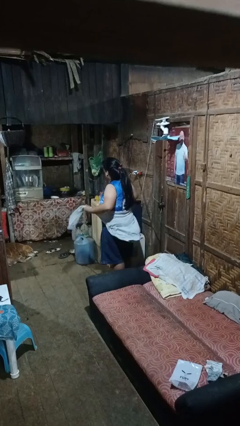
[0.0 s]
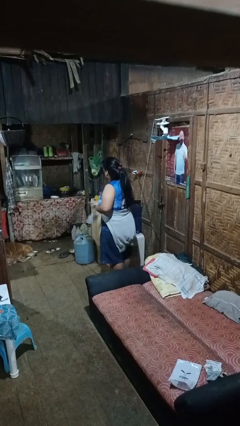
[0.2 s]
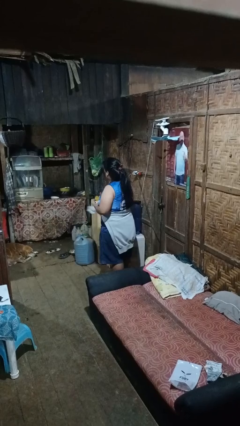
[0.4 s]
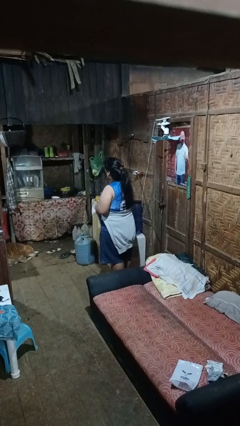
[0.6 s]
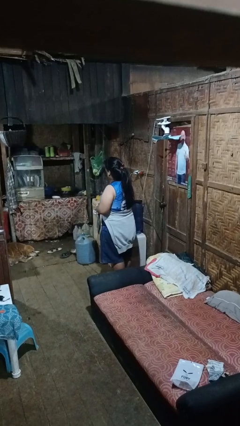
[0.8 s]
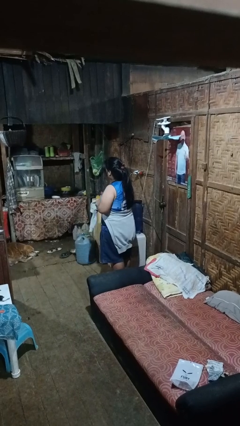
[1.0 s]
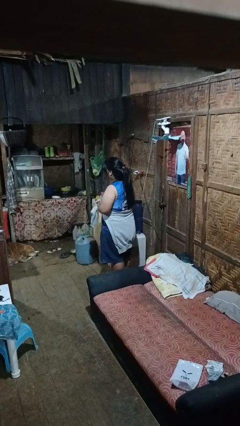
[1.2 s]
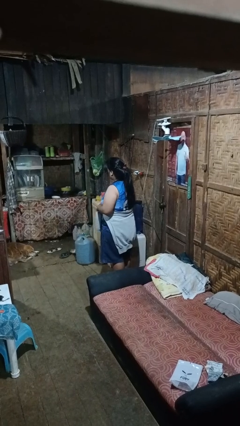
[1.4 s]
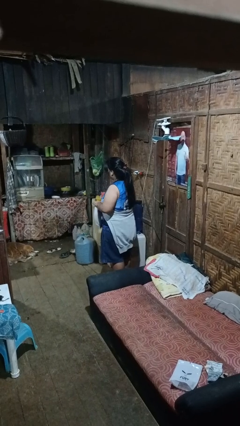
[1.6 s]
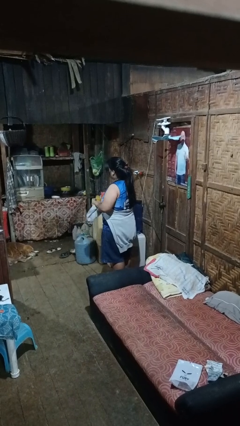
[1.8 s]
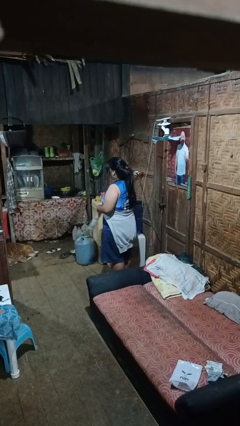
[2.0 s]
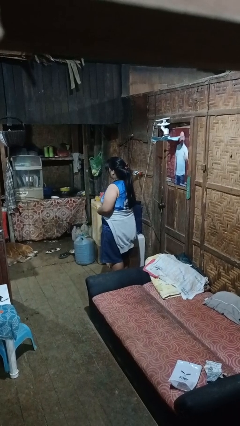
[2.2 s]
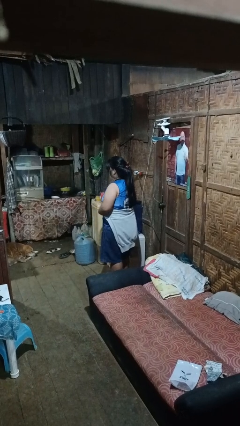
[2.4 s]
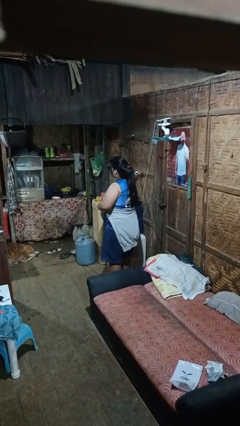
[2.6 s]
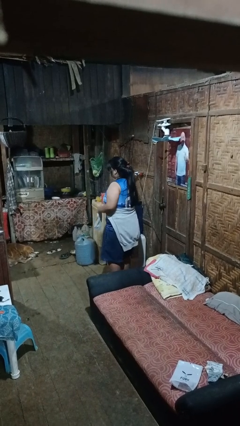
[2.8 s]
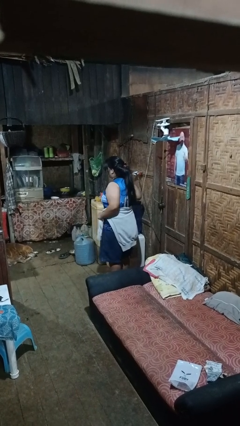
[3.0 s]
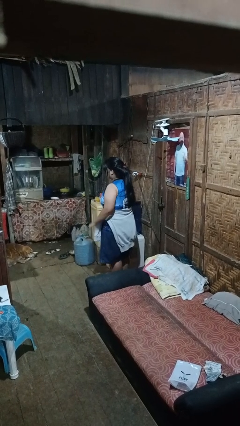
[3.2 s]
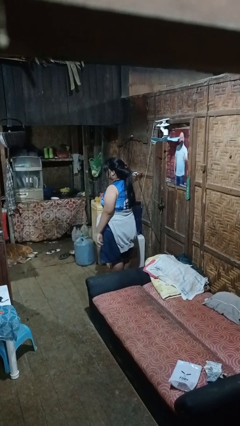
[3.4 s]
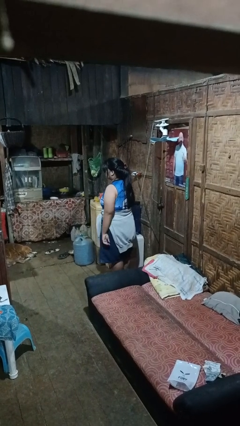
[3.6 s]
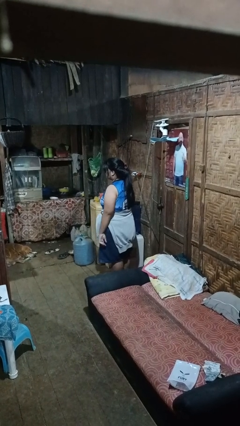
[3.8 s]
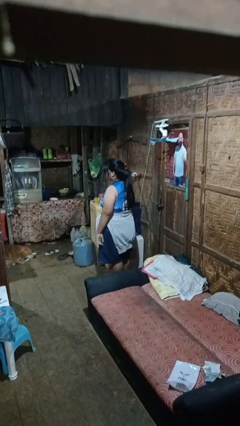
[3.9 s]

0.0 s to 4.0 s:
person ties jacket around waist

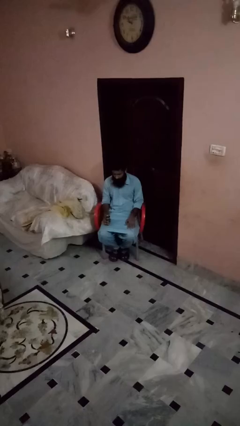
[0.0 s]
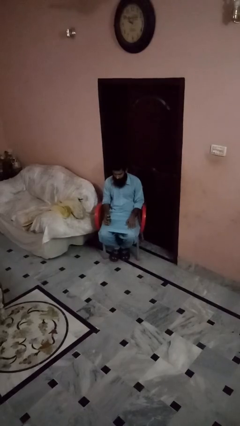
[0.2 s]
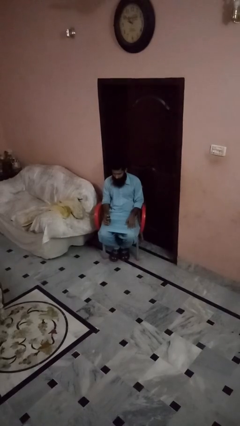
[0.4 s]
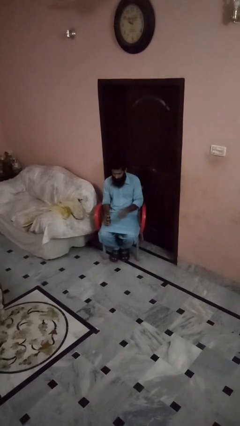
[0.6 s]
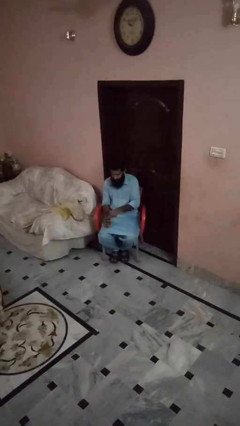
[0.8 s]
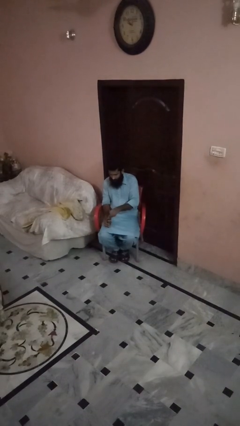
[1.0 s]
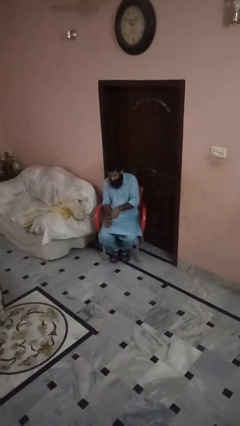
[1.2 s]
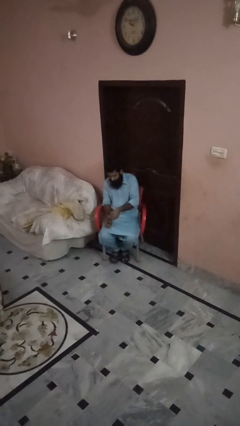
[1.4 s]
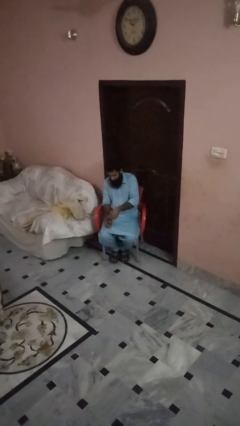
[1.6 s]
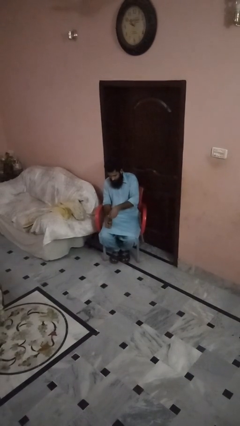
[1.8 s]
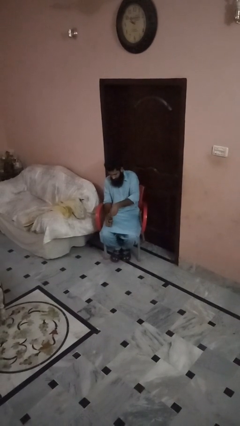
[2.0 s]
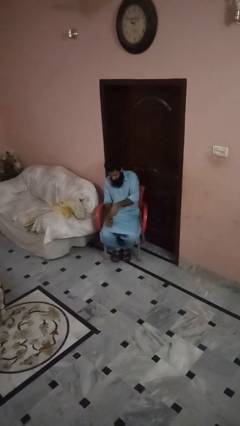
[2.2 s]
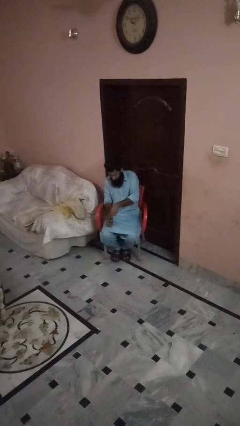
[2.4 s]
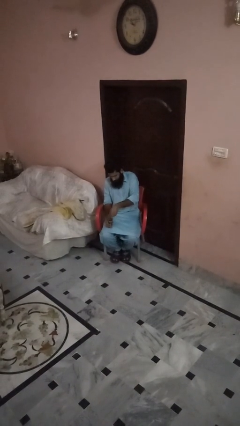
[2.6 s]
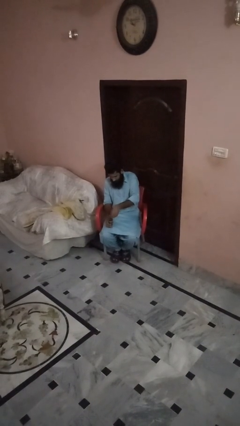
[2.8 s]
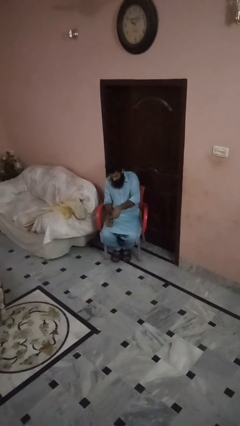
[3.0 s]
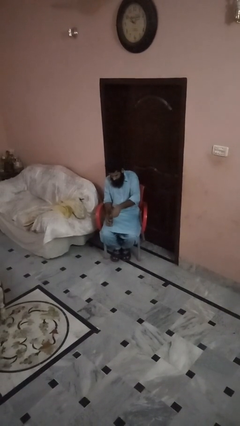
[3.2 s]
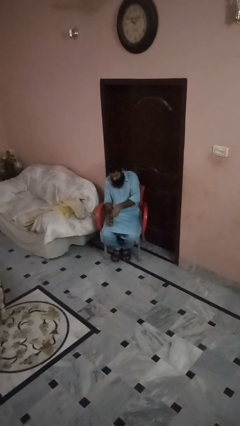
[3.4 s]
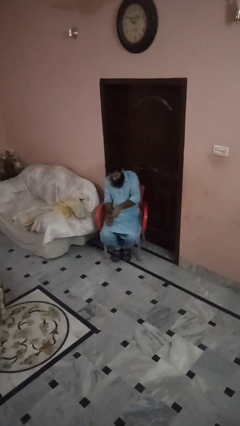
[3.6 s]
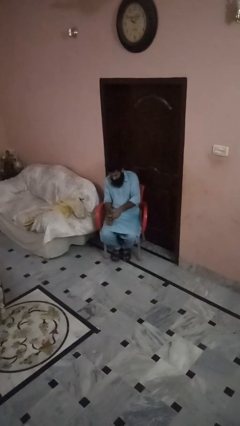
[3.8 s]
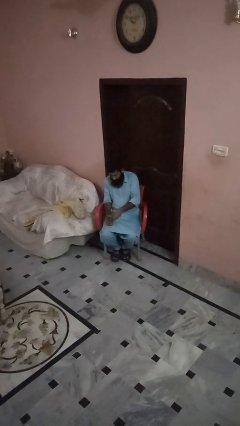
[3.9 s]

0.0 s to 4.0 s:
person opens beverage can

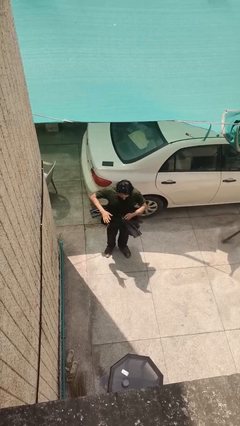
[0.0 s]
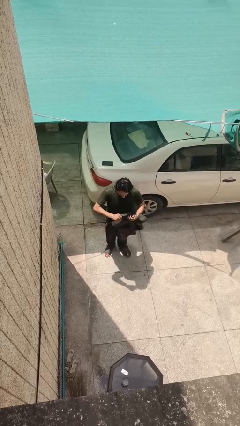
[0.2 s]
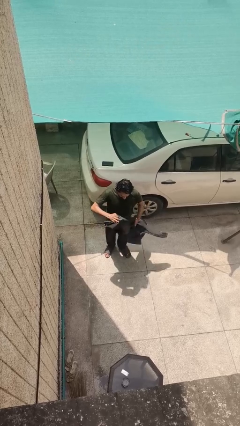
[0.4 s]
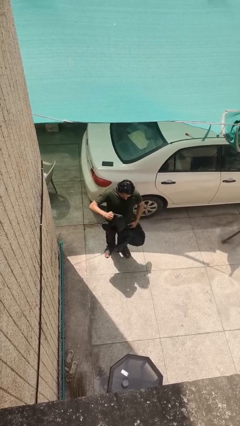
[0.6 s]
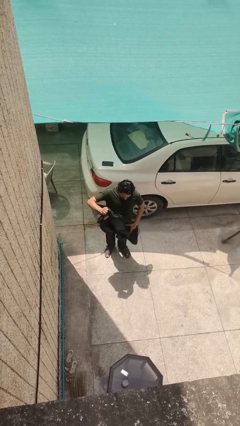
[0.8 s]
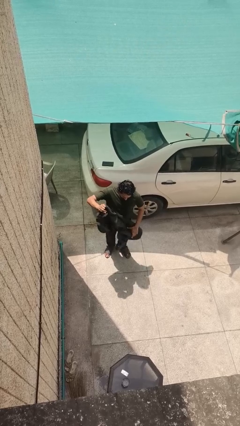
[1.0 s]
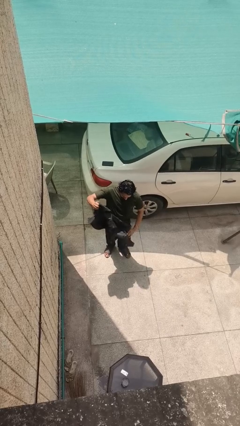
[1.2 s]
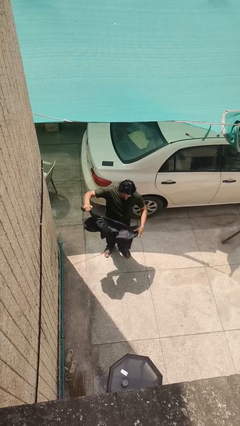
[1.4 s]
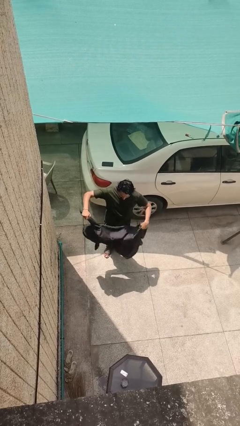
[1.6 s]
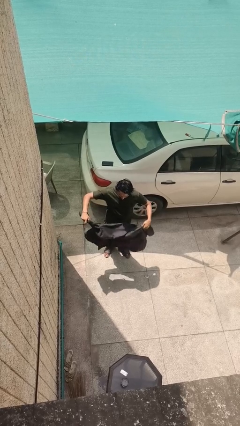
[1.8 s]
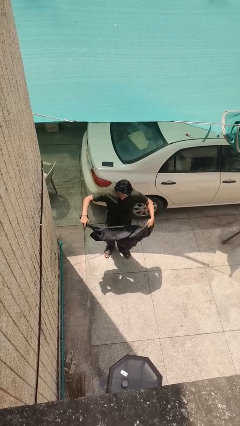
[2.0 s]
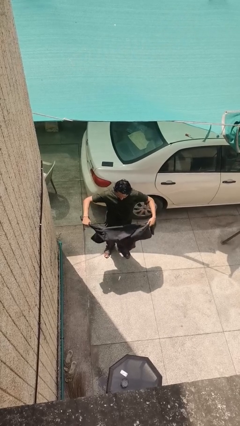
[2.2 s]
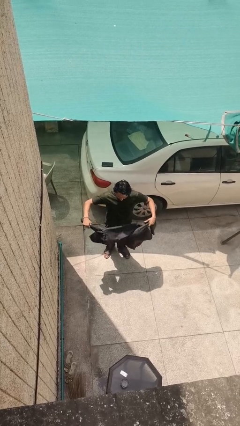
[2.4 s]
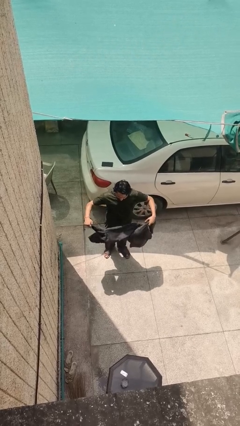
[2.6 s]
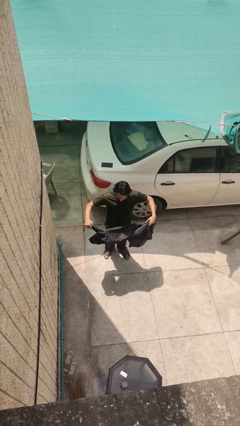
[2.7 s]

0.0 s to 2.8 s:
person unties jacket around waist

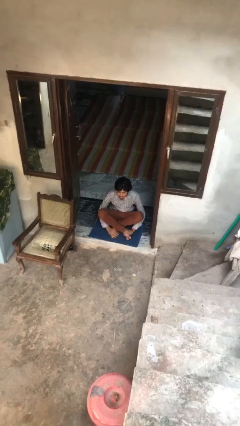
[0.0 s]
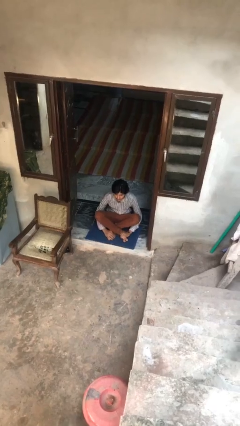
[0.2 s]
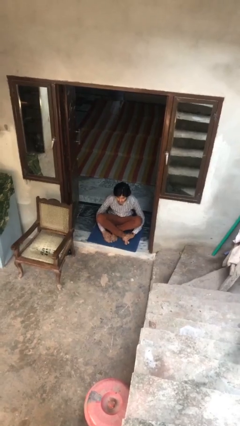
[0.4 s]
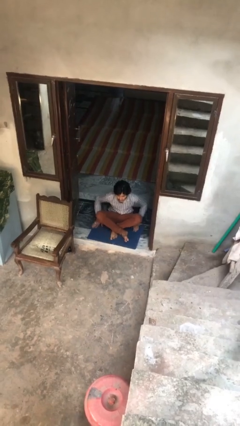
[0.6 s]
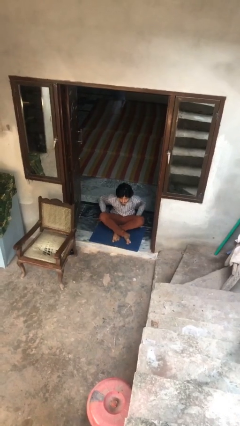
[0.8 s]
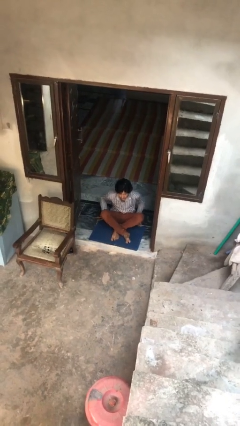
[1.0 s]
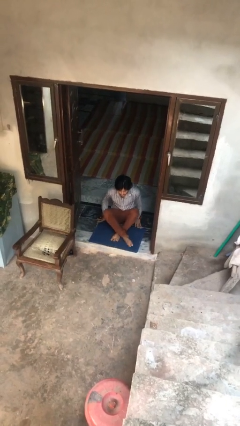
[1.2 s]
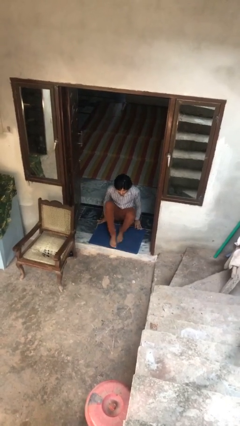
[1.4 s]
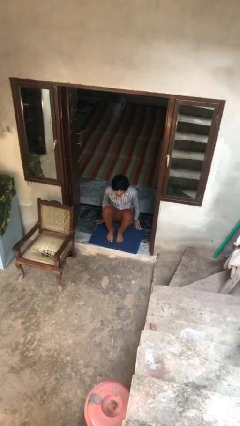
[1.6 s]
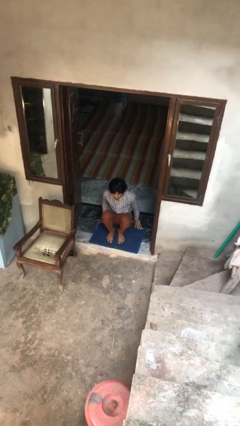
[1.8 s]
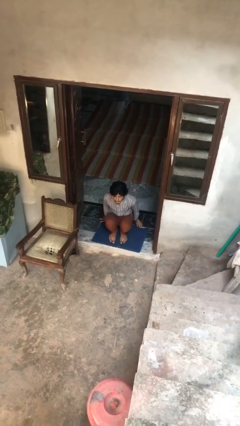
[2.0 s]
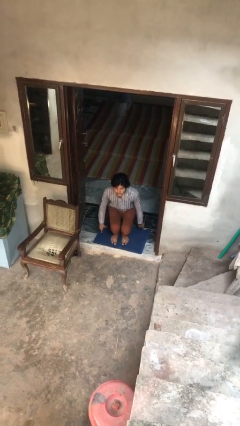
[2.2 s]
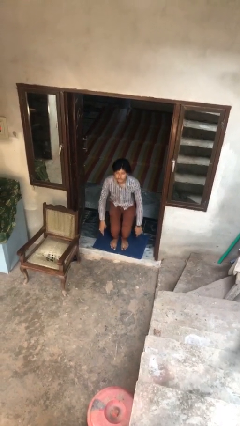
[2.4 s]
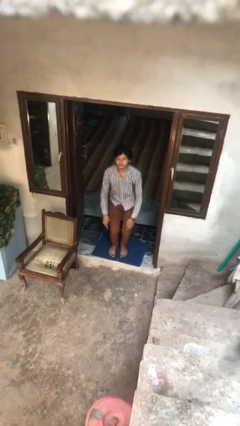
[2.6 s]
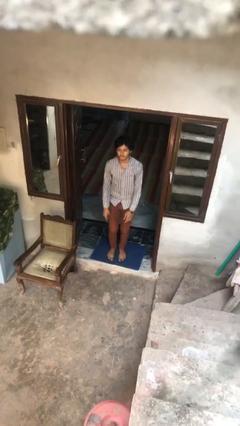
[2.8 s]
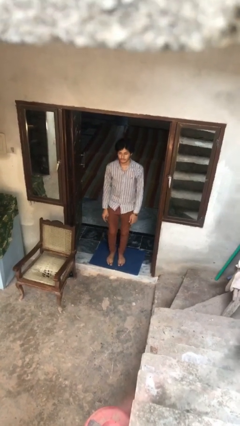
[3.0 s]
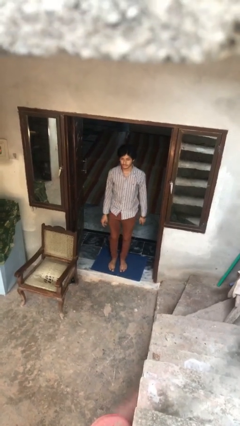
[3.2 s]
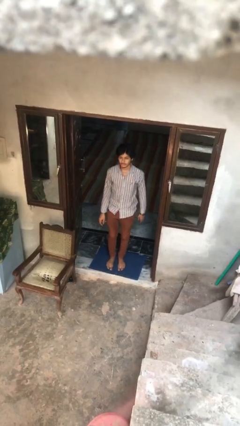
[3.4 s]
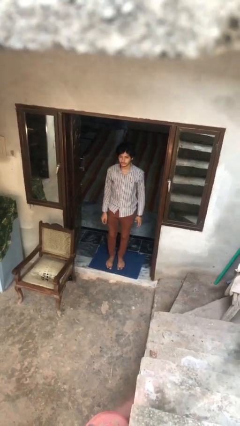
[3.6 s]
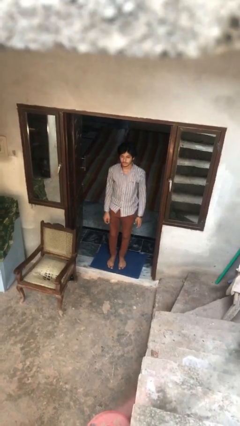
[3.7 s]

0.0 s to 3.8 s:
person stands up from floor

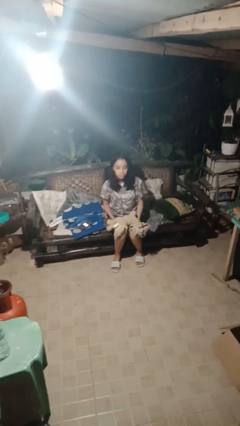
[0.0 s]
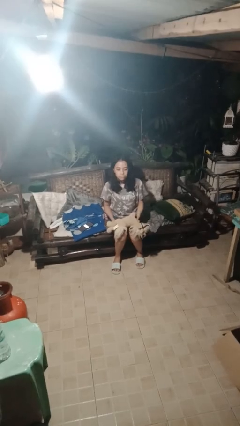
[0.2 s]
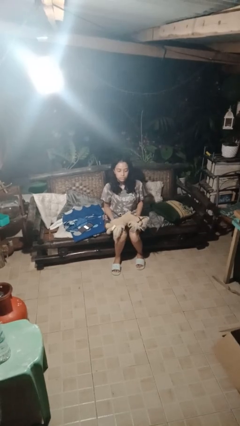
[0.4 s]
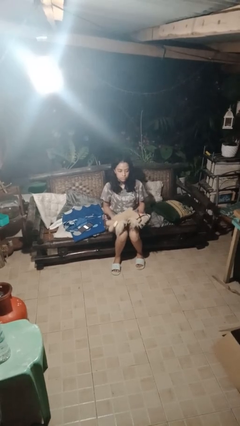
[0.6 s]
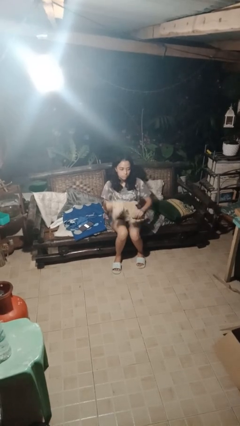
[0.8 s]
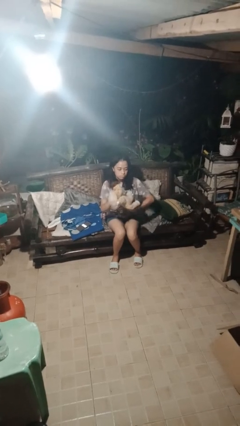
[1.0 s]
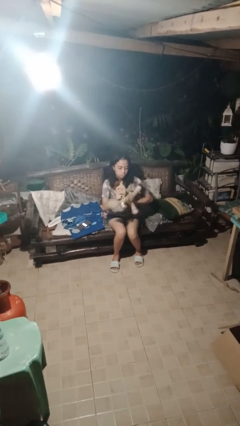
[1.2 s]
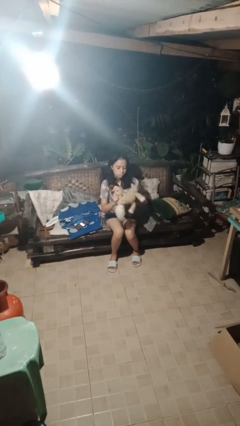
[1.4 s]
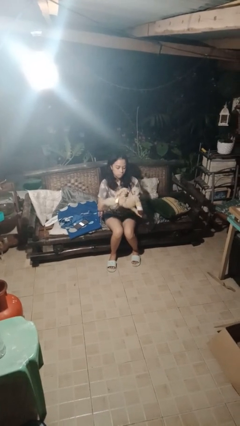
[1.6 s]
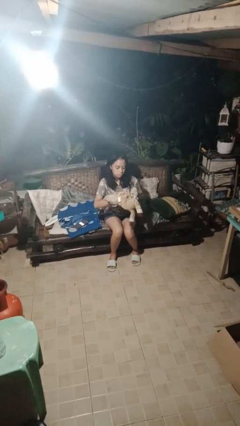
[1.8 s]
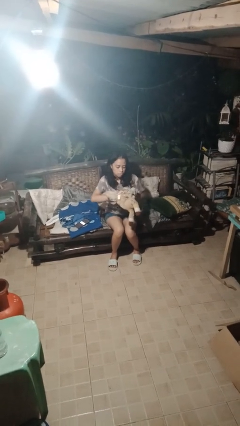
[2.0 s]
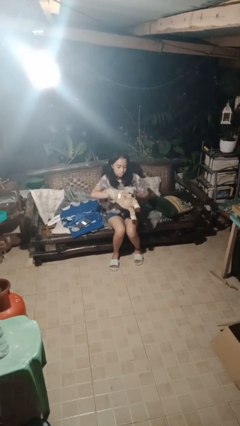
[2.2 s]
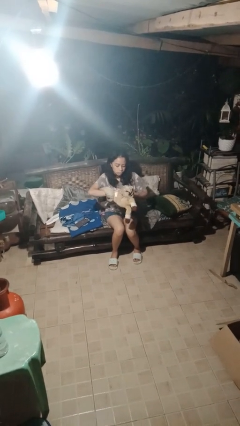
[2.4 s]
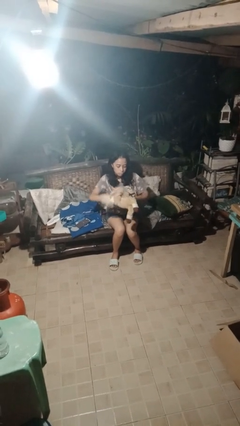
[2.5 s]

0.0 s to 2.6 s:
person squeezes object

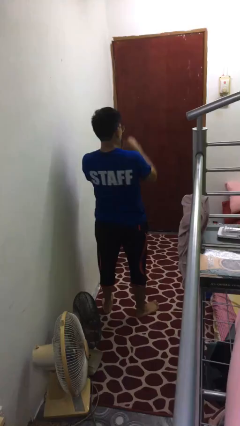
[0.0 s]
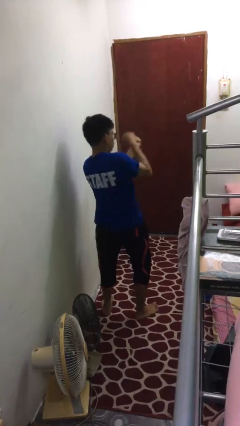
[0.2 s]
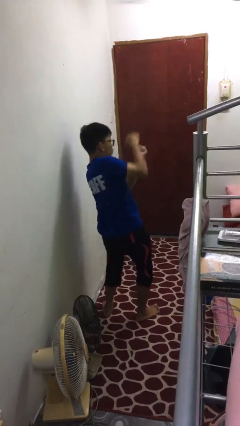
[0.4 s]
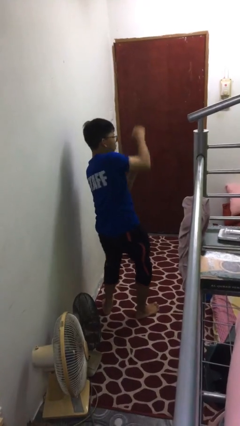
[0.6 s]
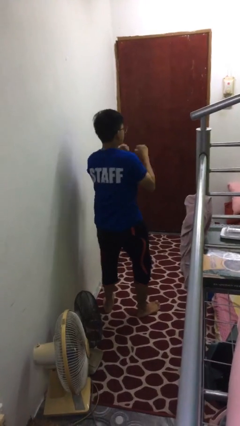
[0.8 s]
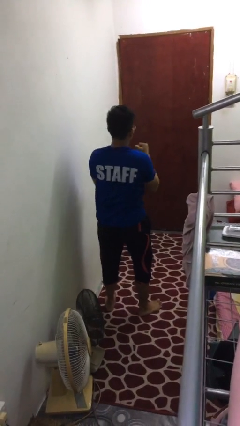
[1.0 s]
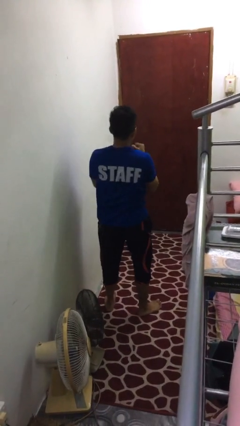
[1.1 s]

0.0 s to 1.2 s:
person punches
